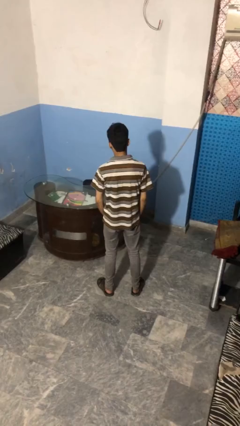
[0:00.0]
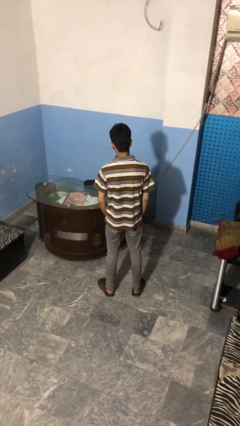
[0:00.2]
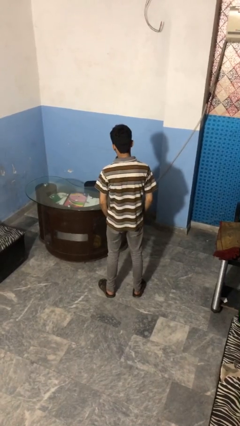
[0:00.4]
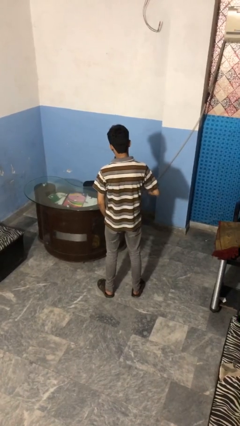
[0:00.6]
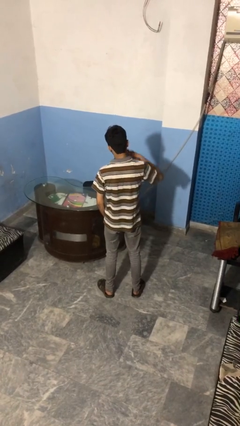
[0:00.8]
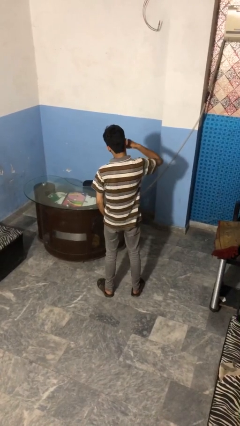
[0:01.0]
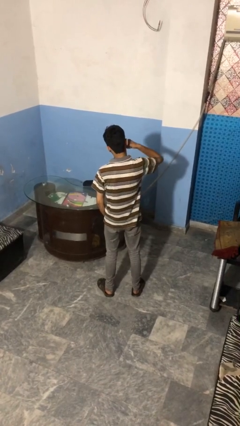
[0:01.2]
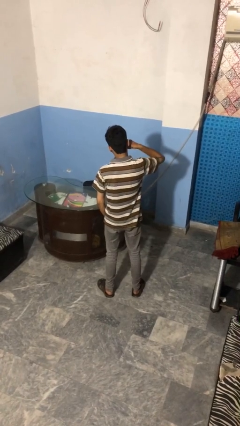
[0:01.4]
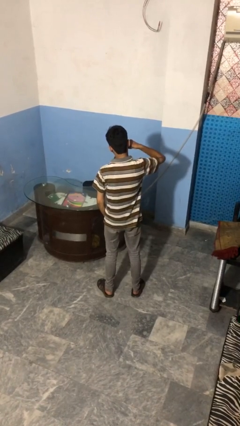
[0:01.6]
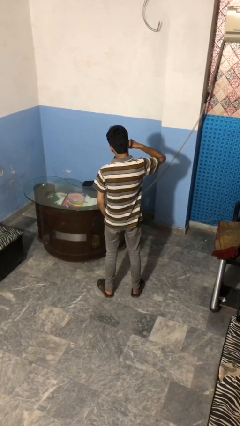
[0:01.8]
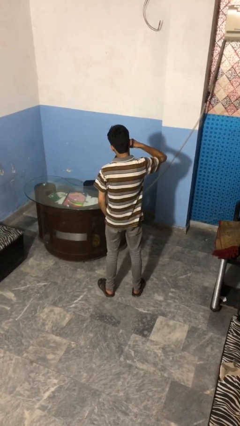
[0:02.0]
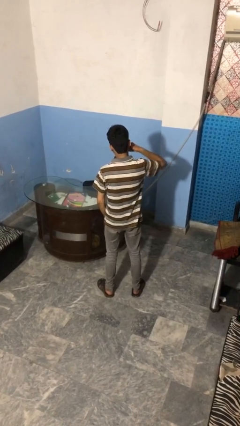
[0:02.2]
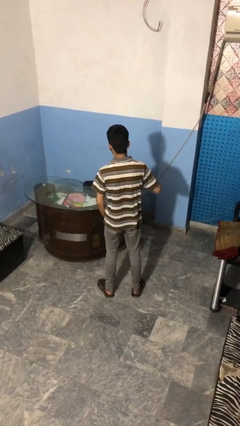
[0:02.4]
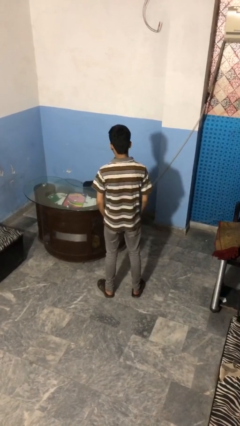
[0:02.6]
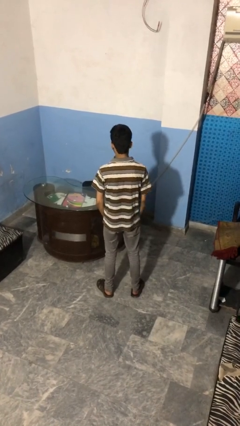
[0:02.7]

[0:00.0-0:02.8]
person gestures call me

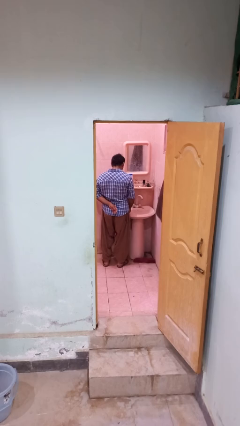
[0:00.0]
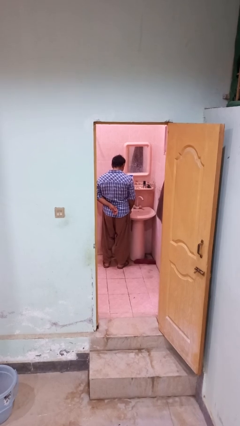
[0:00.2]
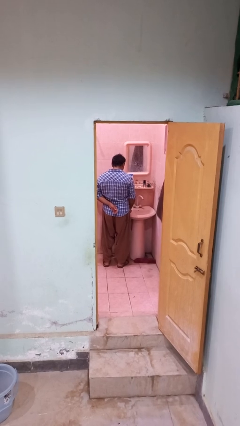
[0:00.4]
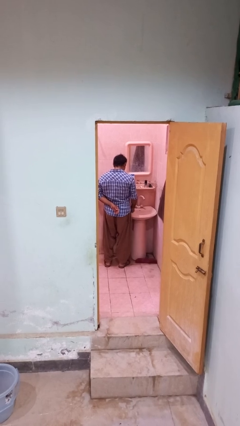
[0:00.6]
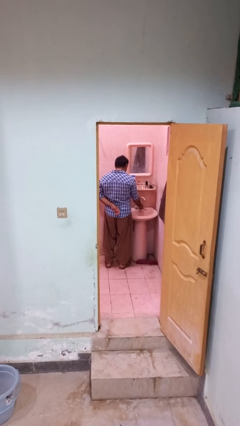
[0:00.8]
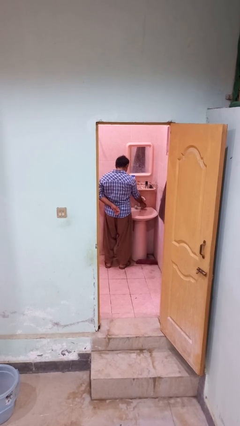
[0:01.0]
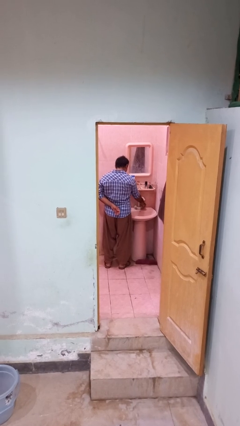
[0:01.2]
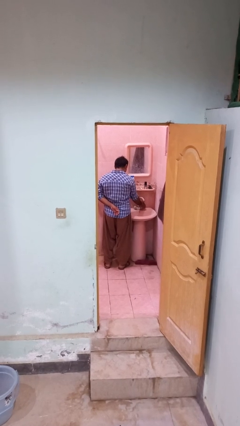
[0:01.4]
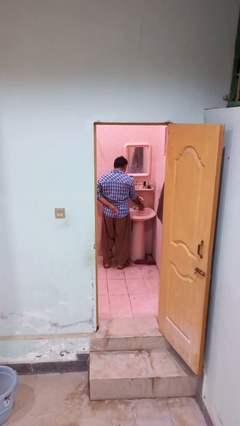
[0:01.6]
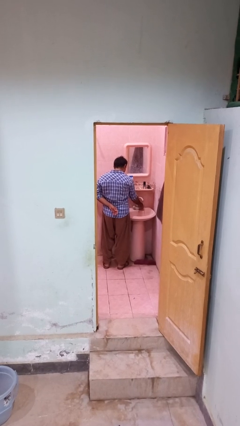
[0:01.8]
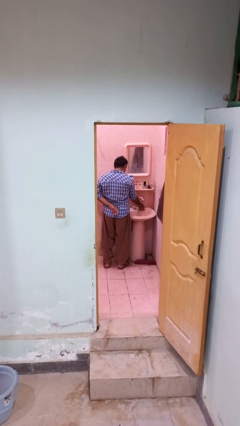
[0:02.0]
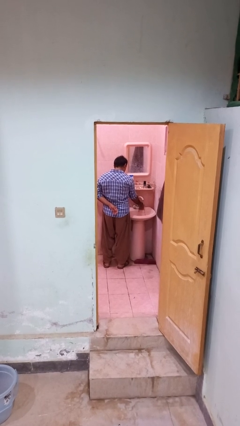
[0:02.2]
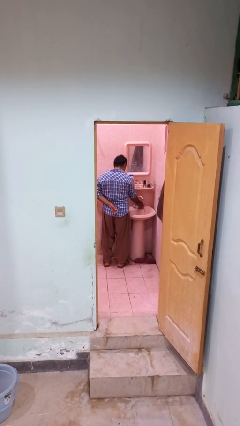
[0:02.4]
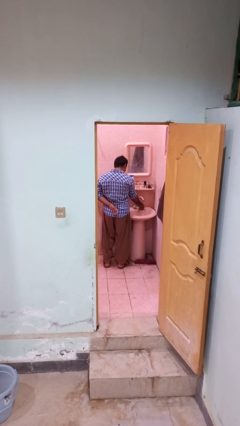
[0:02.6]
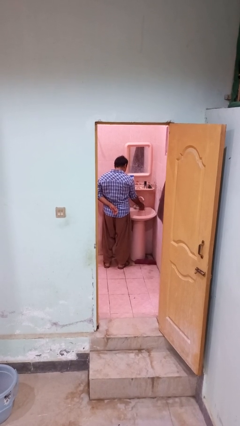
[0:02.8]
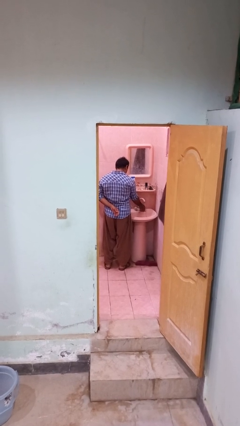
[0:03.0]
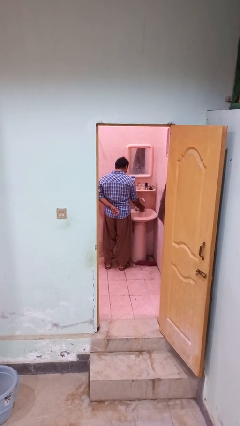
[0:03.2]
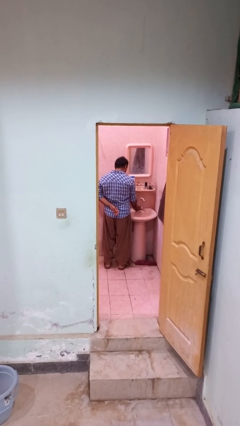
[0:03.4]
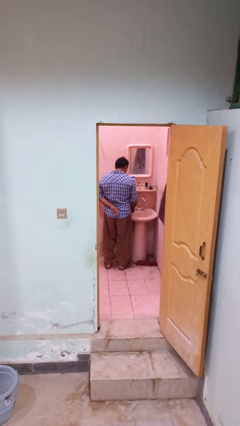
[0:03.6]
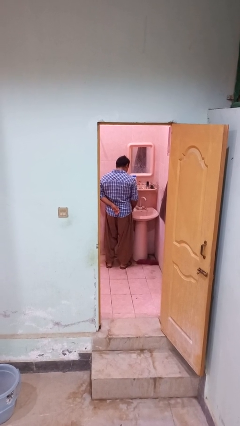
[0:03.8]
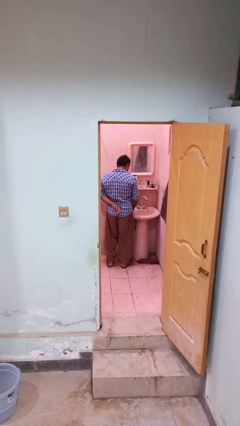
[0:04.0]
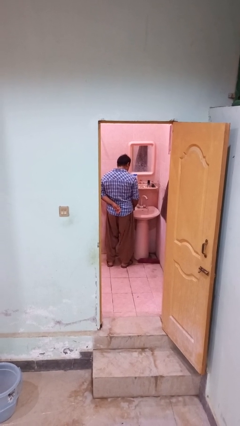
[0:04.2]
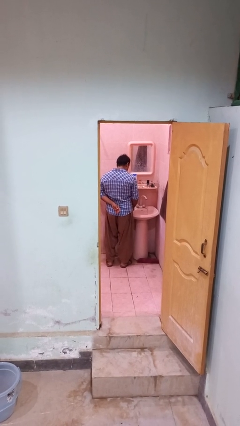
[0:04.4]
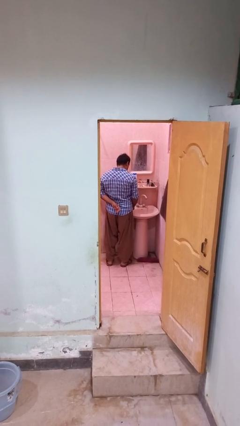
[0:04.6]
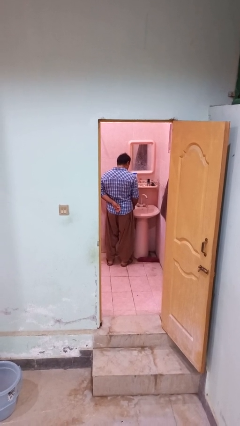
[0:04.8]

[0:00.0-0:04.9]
person turns on faucet

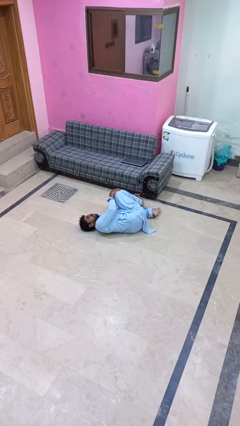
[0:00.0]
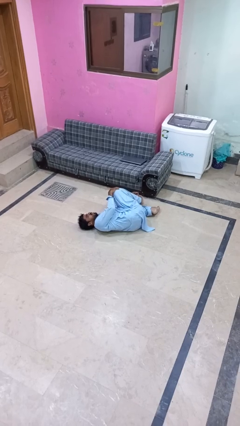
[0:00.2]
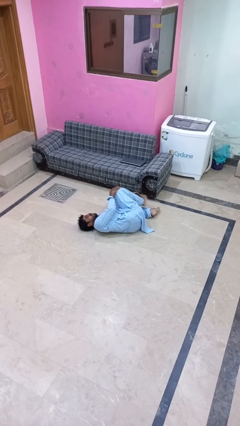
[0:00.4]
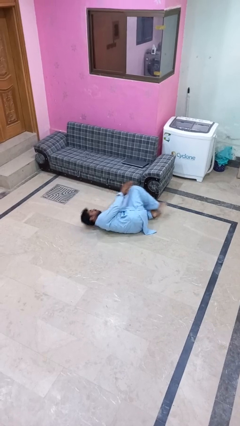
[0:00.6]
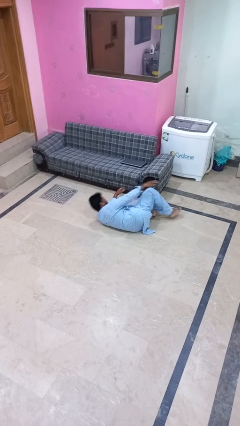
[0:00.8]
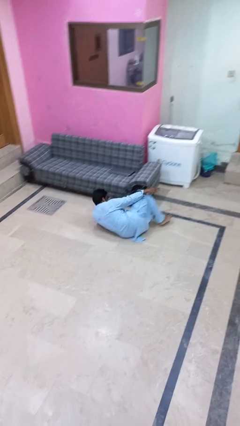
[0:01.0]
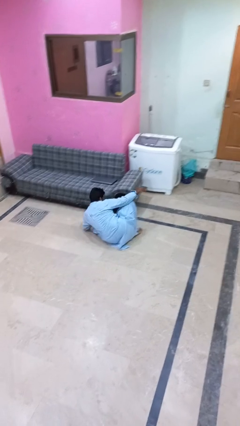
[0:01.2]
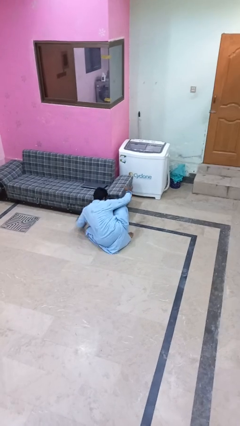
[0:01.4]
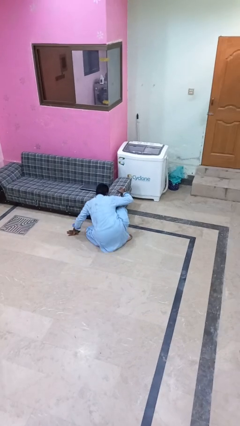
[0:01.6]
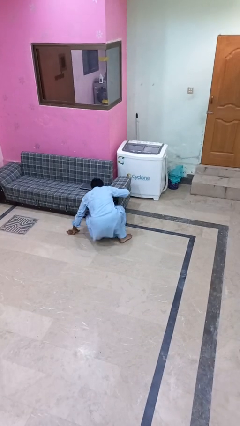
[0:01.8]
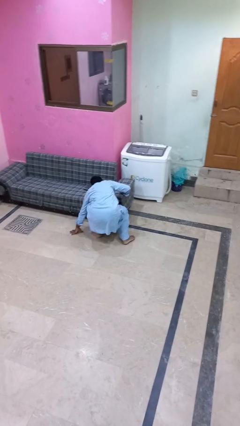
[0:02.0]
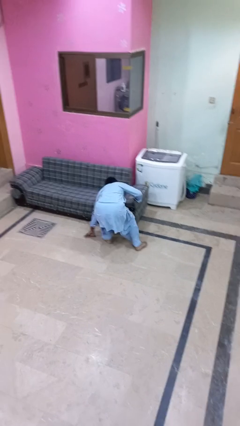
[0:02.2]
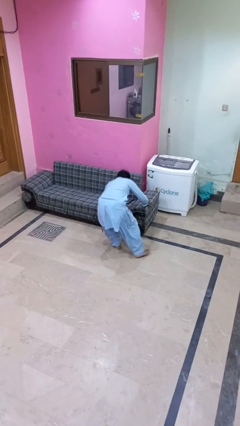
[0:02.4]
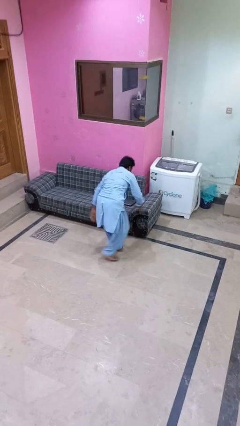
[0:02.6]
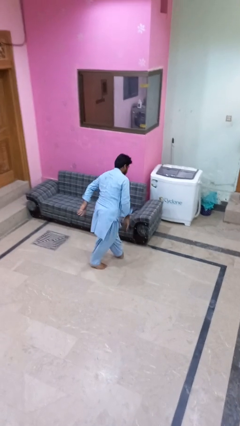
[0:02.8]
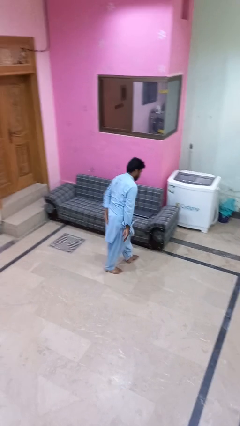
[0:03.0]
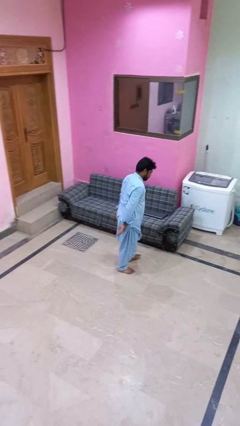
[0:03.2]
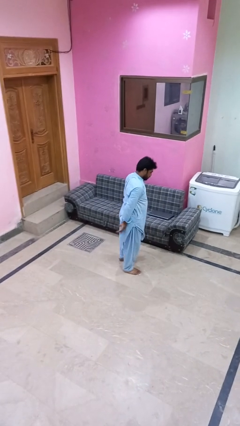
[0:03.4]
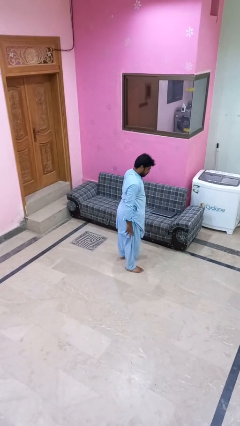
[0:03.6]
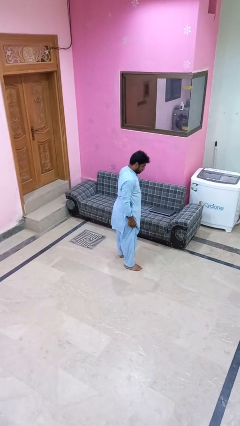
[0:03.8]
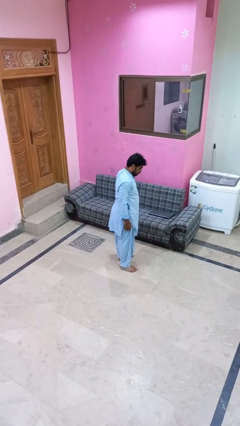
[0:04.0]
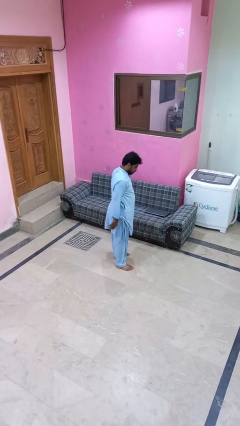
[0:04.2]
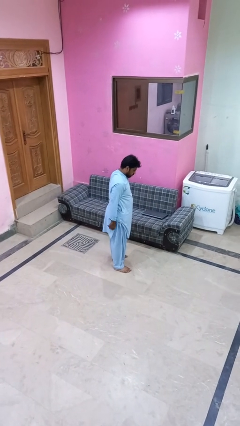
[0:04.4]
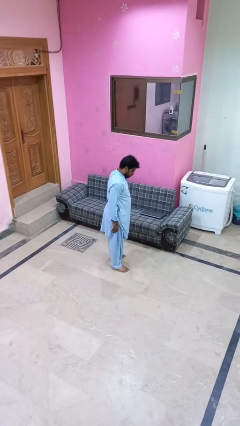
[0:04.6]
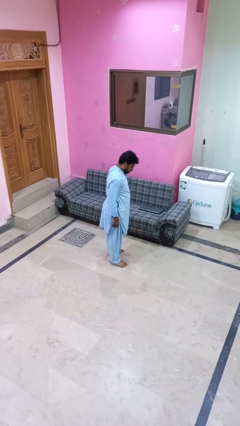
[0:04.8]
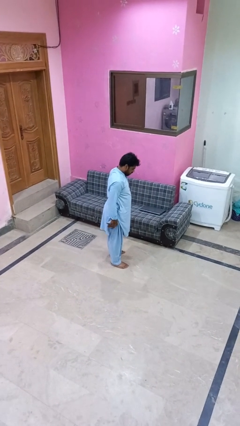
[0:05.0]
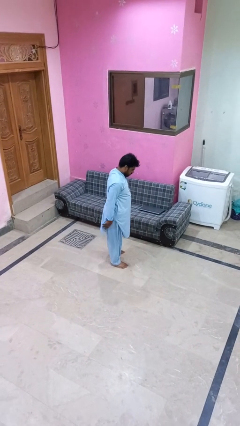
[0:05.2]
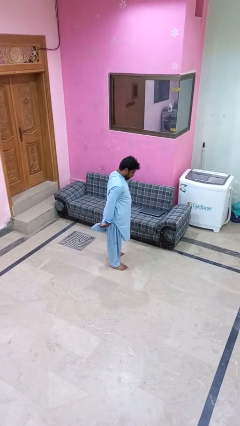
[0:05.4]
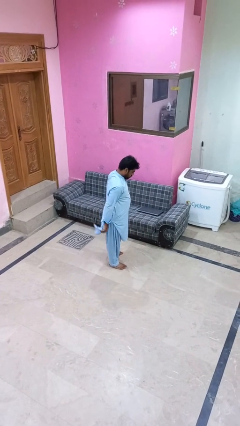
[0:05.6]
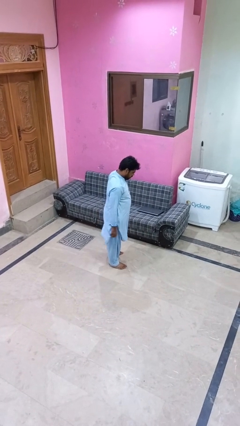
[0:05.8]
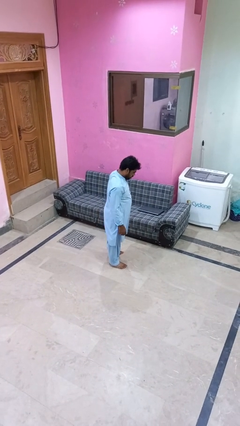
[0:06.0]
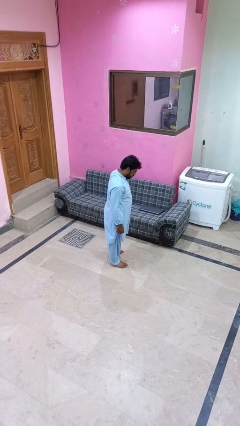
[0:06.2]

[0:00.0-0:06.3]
person stands up from floor

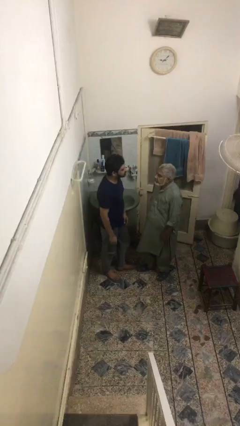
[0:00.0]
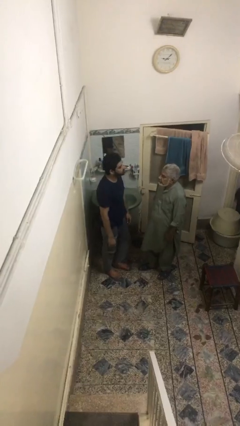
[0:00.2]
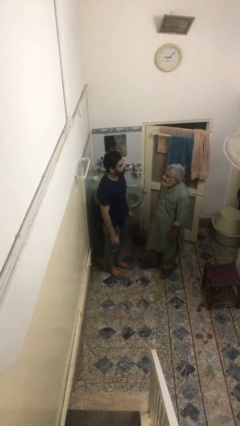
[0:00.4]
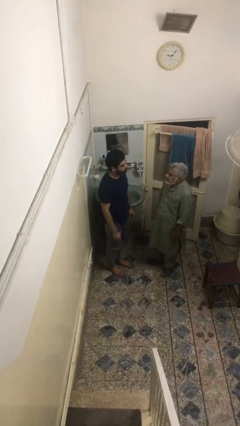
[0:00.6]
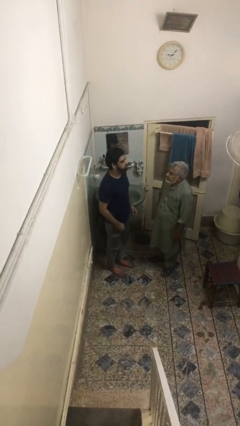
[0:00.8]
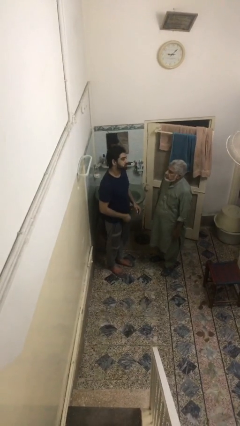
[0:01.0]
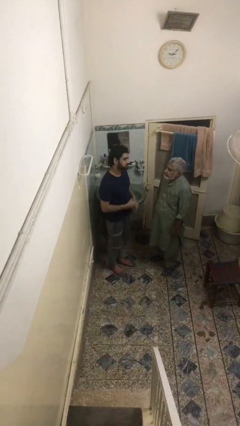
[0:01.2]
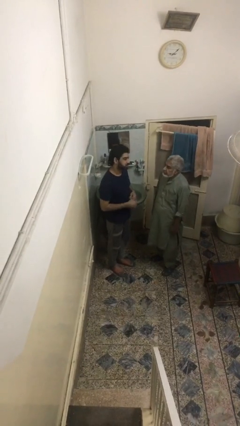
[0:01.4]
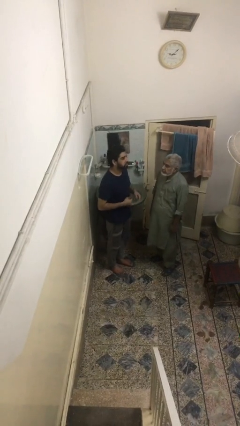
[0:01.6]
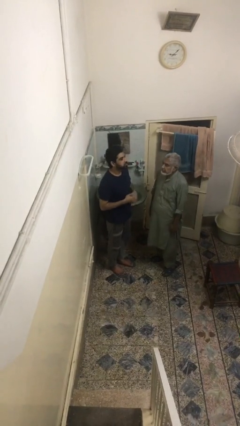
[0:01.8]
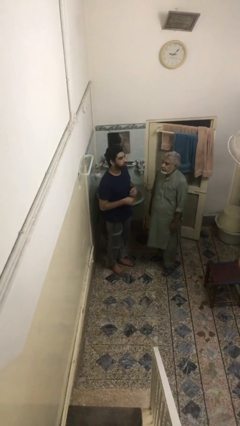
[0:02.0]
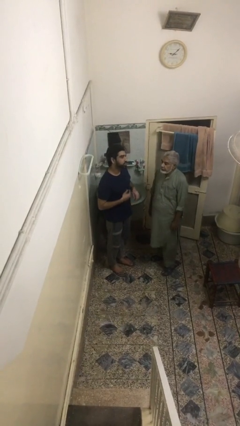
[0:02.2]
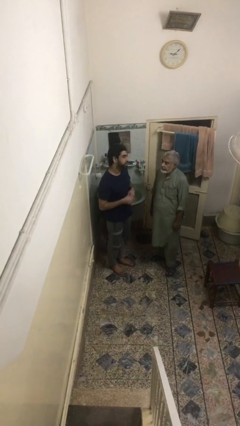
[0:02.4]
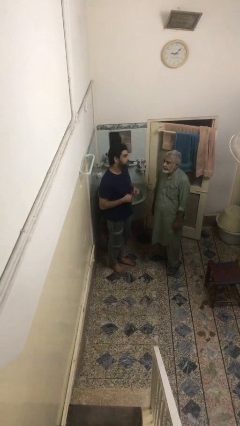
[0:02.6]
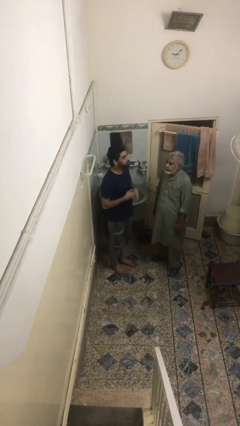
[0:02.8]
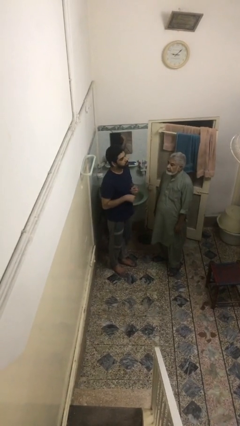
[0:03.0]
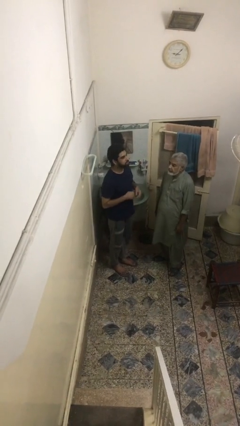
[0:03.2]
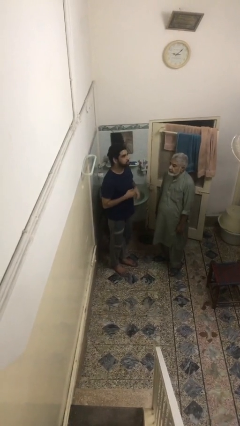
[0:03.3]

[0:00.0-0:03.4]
person talks to person

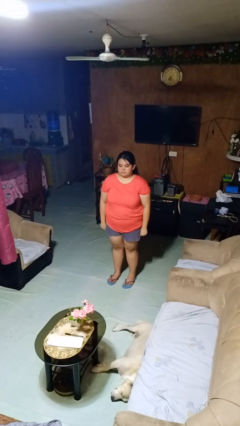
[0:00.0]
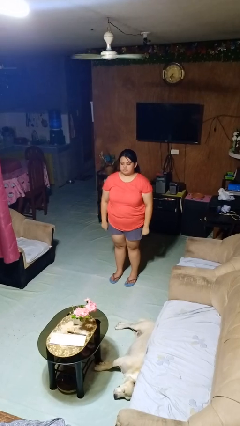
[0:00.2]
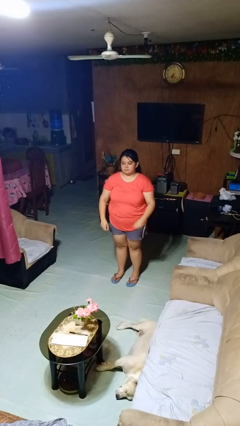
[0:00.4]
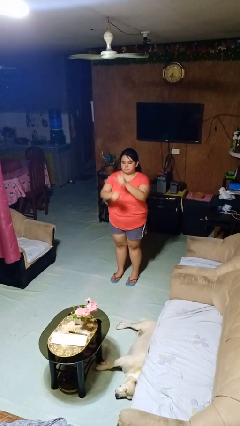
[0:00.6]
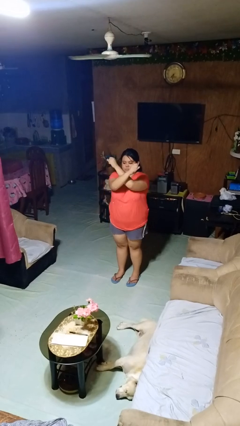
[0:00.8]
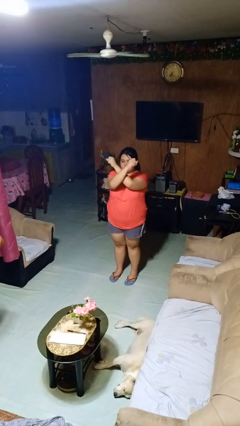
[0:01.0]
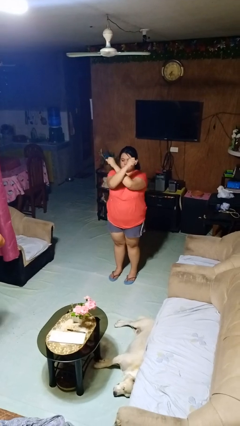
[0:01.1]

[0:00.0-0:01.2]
person gestures arms x
